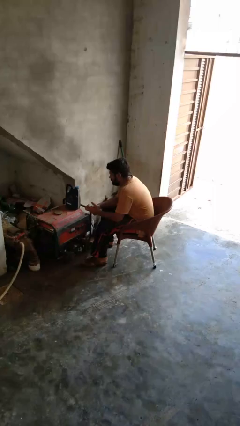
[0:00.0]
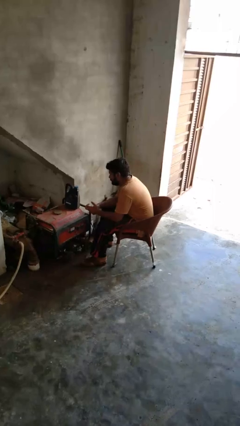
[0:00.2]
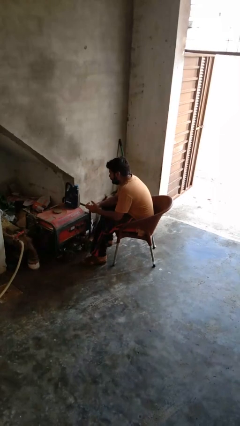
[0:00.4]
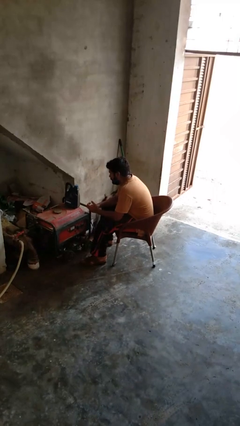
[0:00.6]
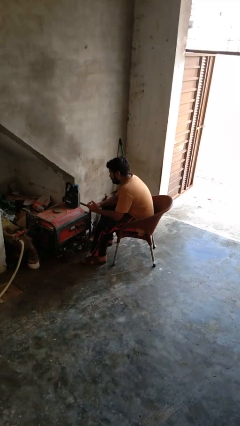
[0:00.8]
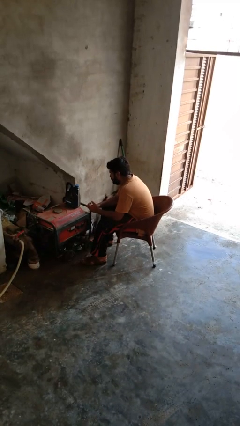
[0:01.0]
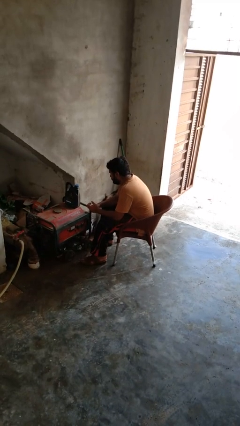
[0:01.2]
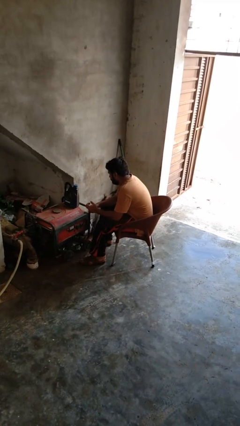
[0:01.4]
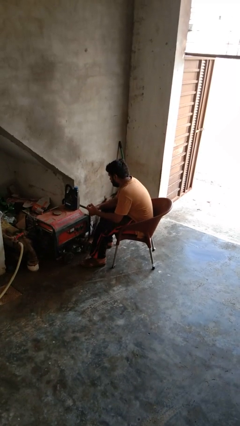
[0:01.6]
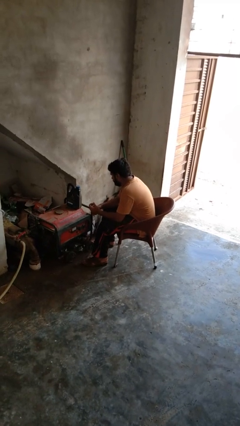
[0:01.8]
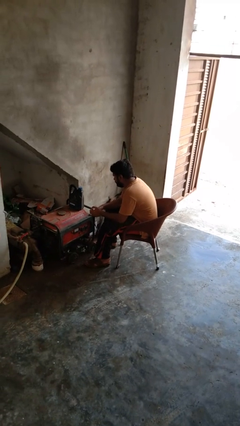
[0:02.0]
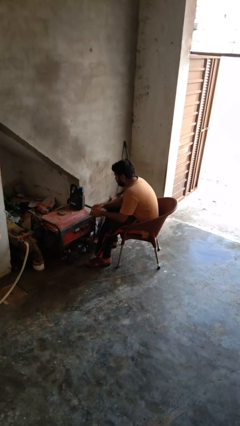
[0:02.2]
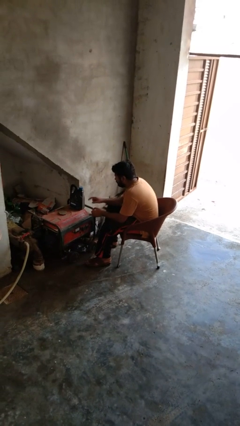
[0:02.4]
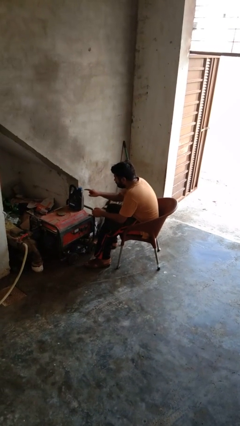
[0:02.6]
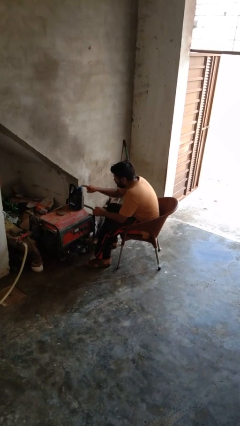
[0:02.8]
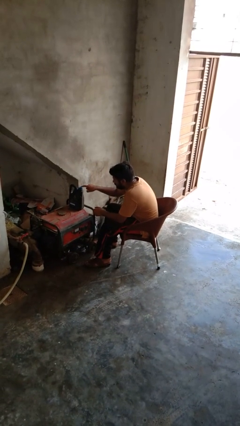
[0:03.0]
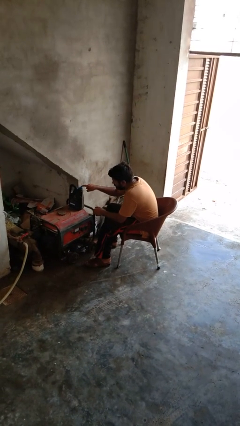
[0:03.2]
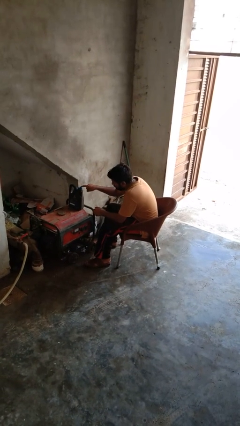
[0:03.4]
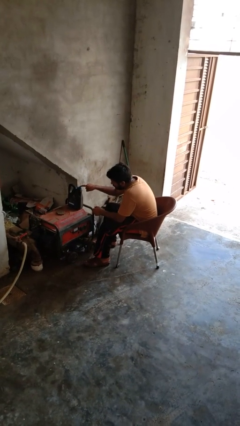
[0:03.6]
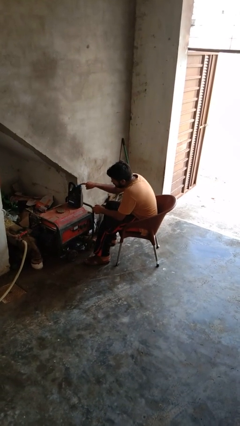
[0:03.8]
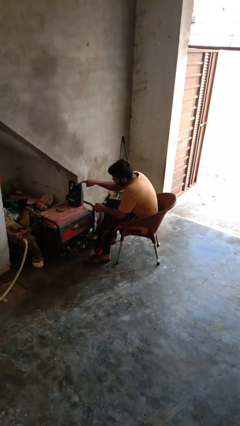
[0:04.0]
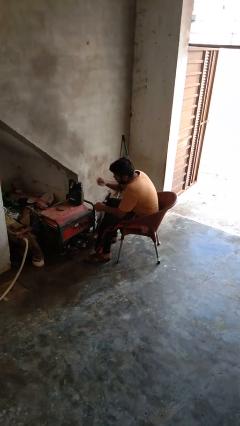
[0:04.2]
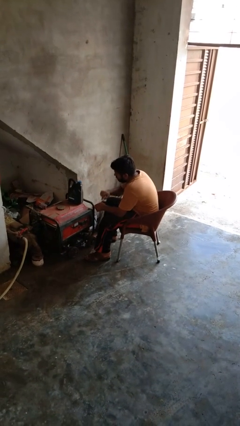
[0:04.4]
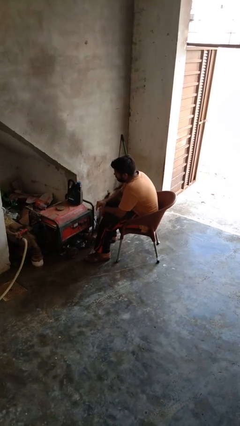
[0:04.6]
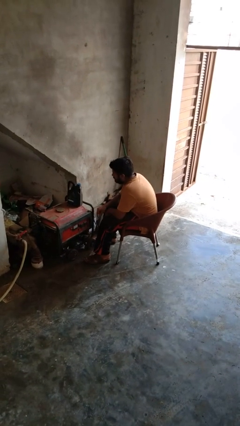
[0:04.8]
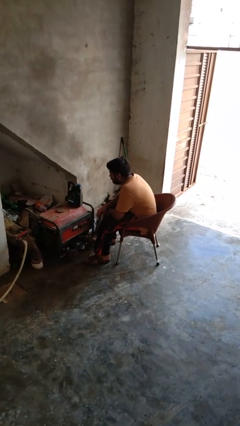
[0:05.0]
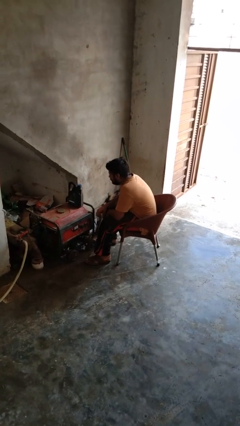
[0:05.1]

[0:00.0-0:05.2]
person taps object with finger

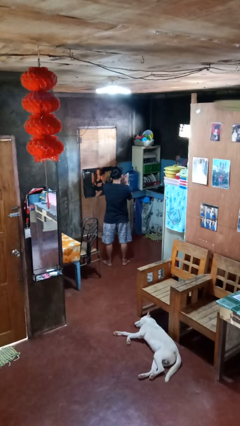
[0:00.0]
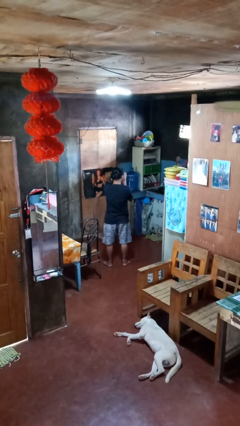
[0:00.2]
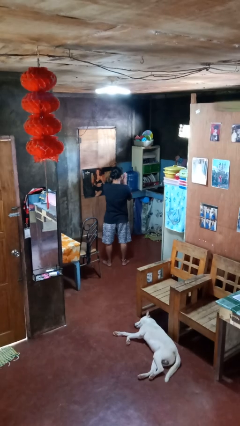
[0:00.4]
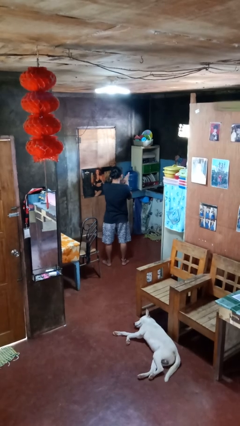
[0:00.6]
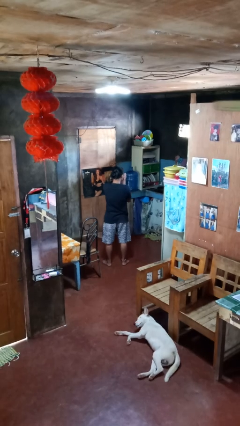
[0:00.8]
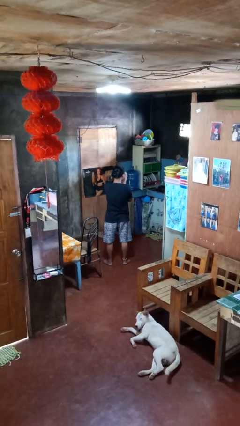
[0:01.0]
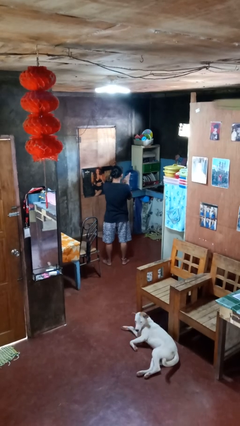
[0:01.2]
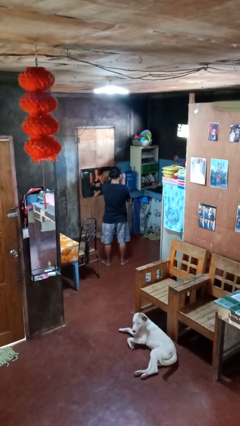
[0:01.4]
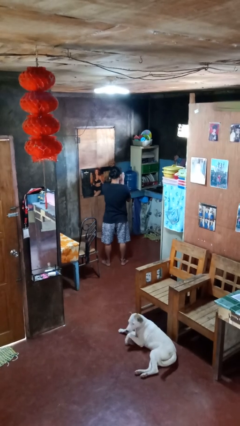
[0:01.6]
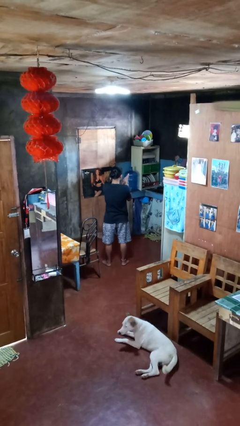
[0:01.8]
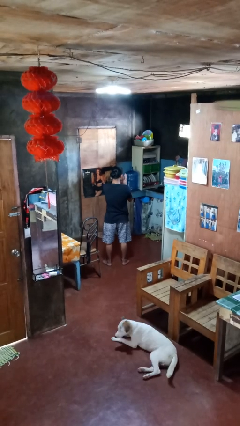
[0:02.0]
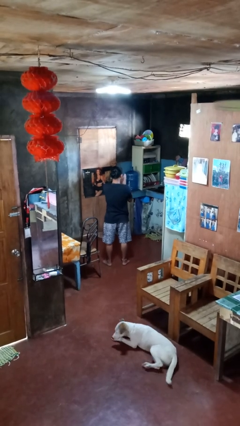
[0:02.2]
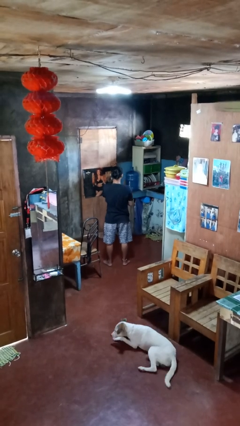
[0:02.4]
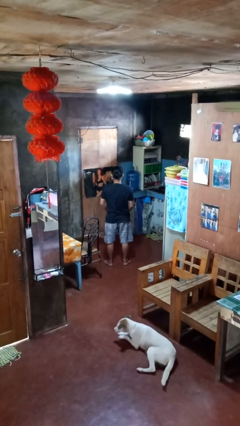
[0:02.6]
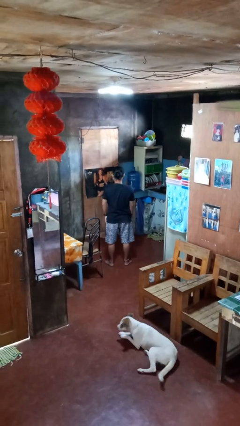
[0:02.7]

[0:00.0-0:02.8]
person blows into hands

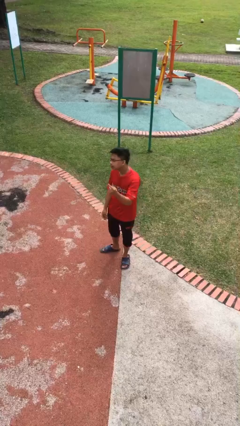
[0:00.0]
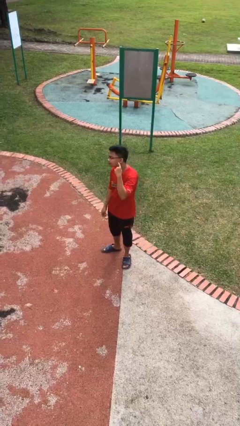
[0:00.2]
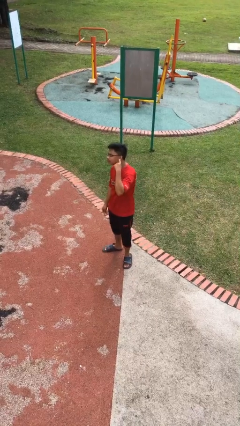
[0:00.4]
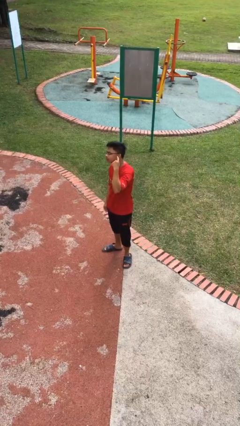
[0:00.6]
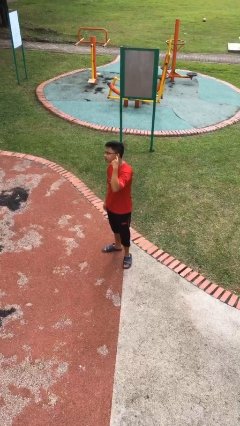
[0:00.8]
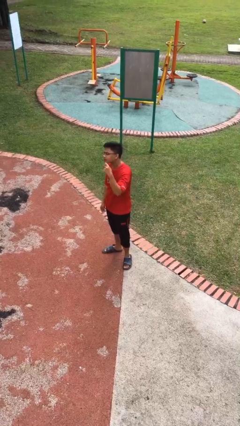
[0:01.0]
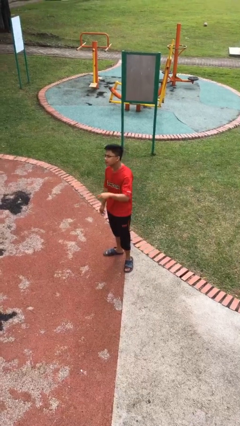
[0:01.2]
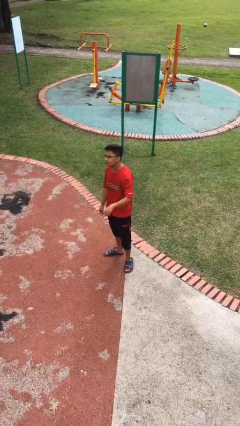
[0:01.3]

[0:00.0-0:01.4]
person gestures listen closely

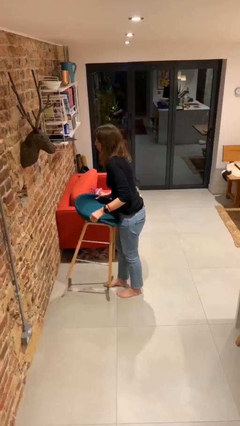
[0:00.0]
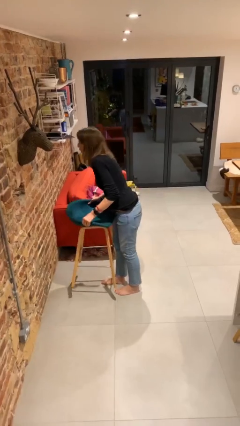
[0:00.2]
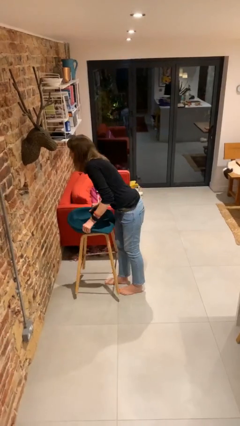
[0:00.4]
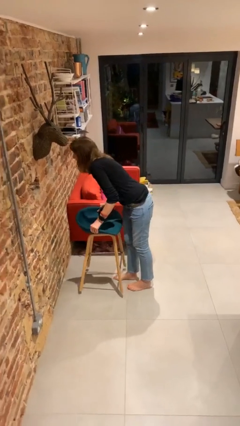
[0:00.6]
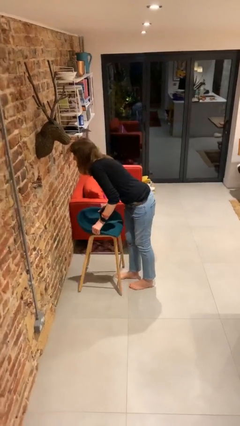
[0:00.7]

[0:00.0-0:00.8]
person puts down object on floor

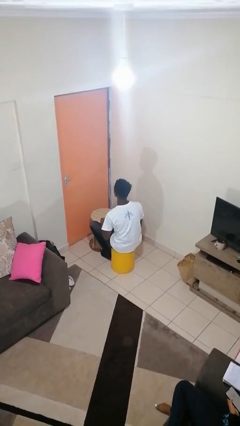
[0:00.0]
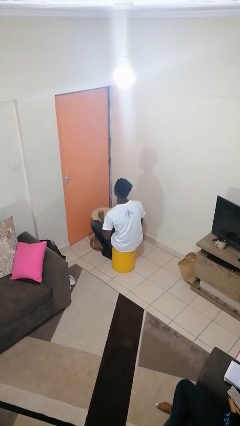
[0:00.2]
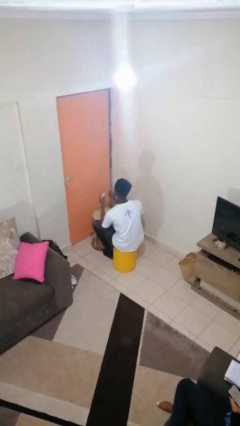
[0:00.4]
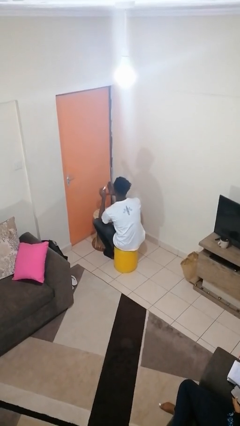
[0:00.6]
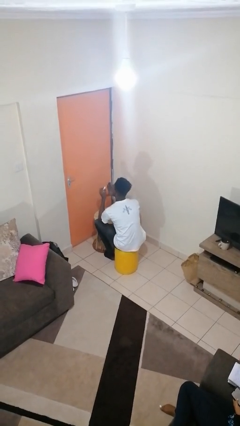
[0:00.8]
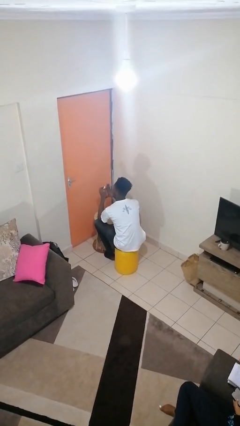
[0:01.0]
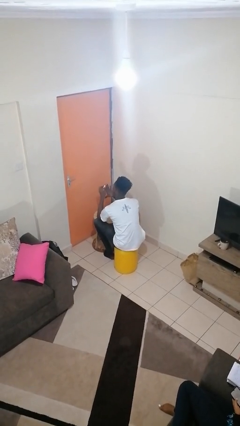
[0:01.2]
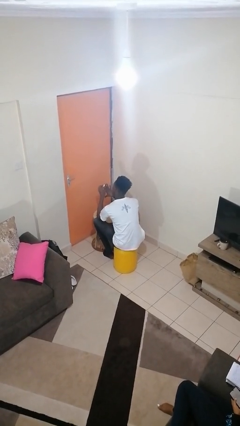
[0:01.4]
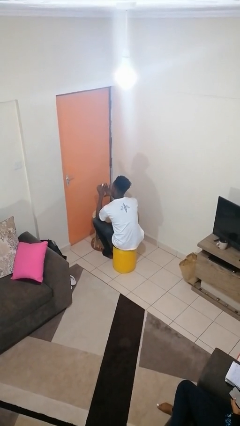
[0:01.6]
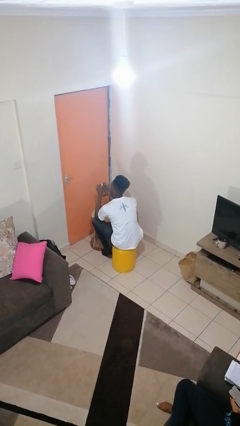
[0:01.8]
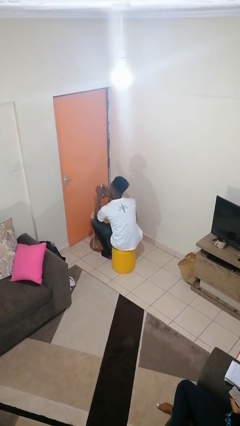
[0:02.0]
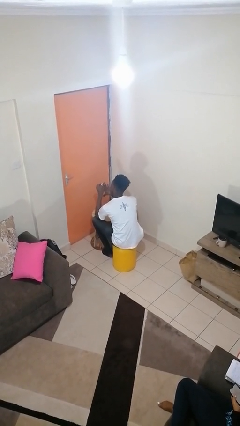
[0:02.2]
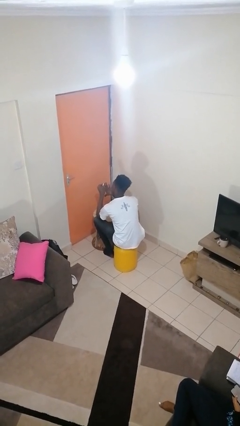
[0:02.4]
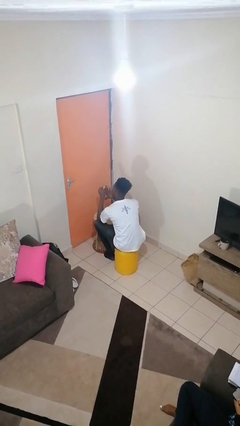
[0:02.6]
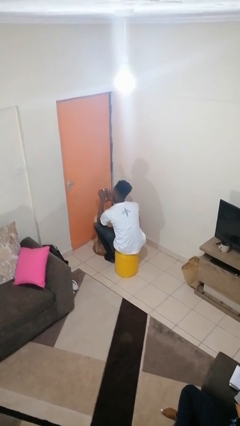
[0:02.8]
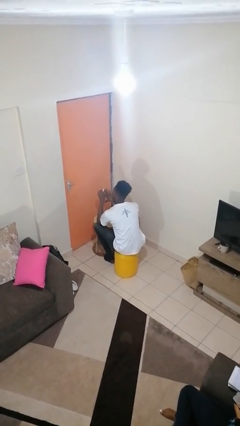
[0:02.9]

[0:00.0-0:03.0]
person paints fingernails

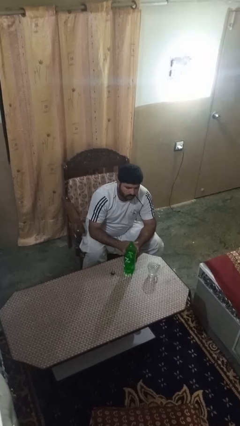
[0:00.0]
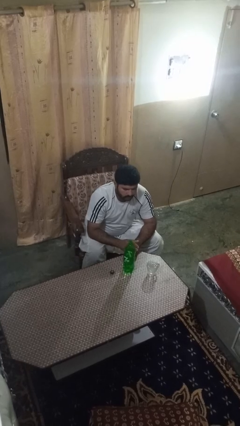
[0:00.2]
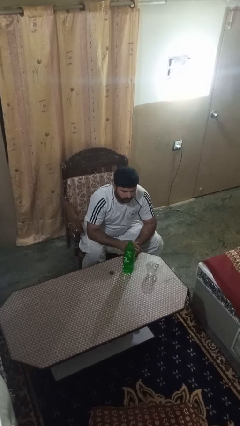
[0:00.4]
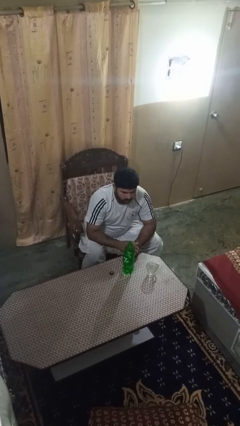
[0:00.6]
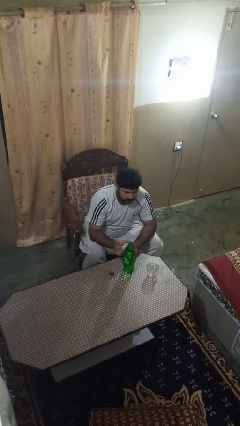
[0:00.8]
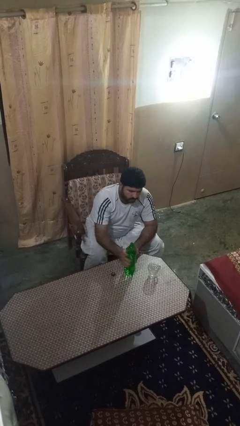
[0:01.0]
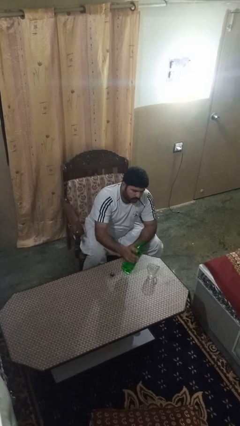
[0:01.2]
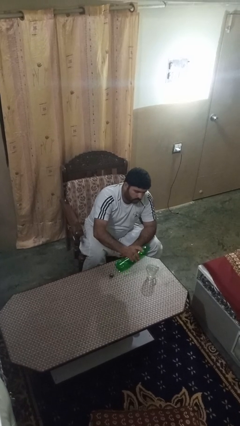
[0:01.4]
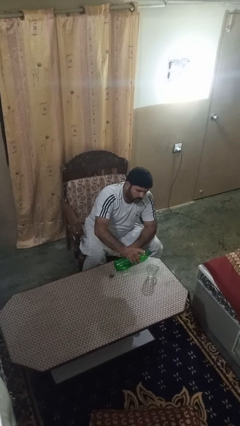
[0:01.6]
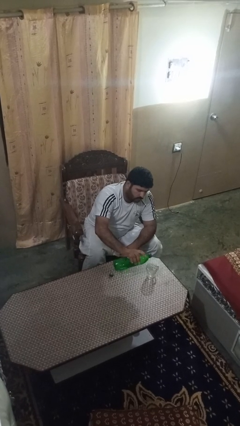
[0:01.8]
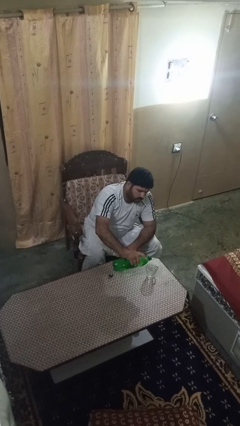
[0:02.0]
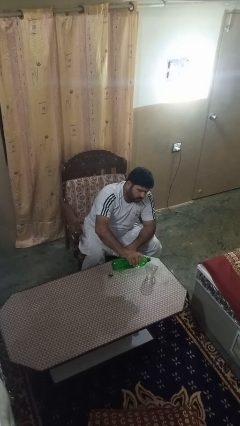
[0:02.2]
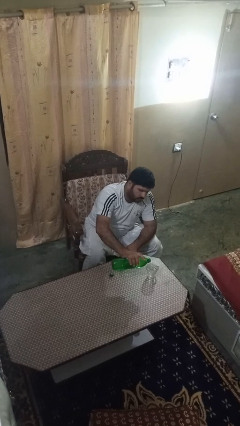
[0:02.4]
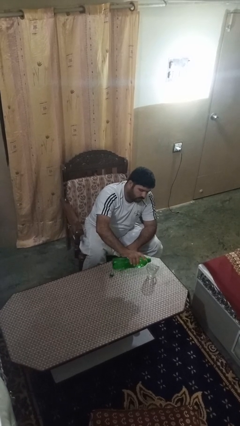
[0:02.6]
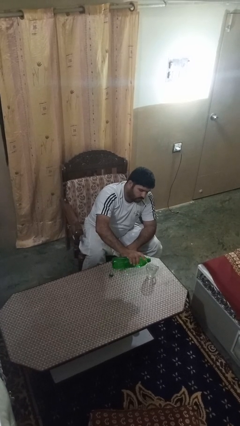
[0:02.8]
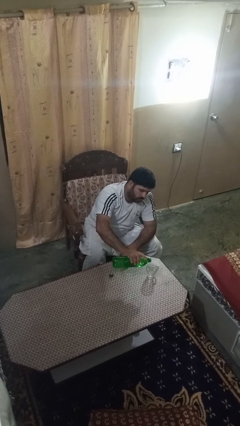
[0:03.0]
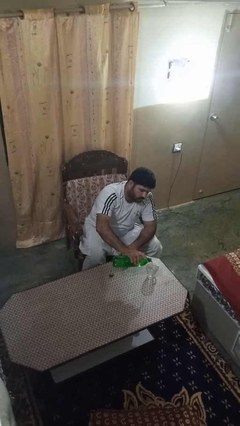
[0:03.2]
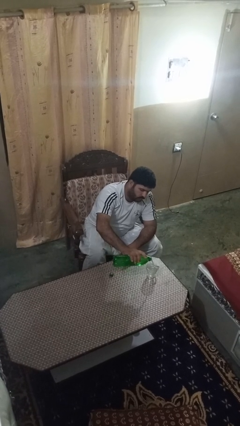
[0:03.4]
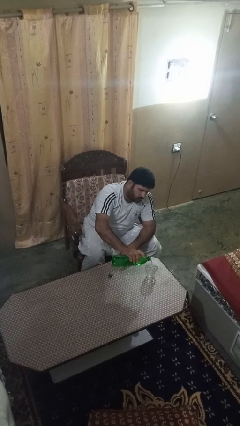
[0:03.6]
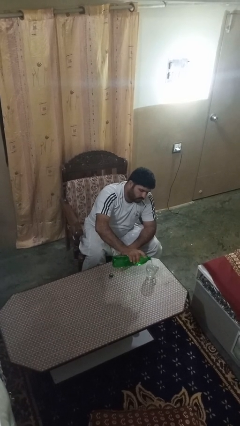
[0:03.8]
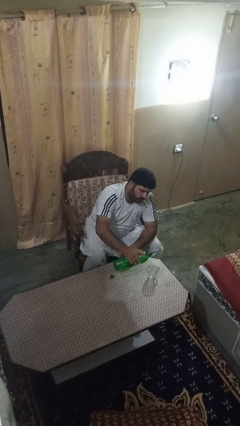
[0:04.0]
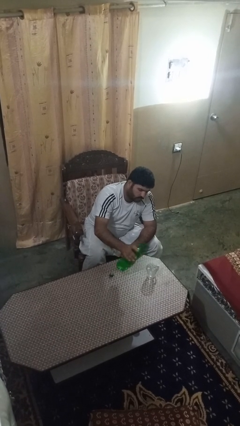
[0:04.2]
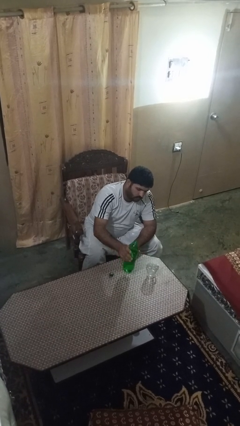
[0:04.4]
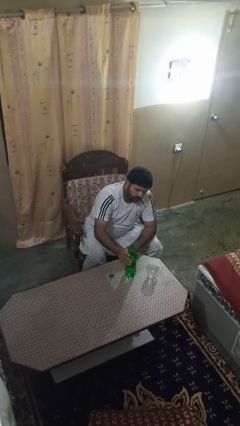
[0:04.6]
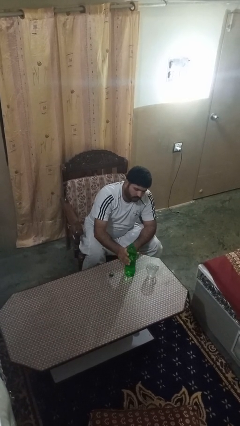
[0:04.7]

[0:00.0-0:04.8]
person pours liquid into cup
